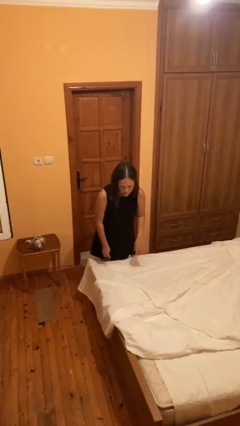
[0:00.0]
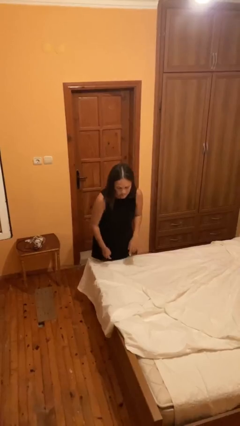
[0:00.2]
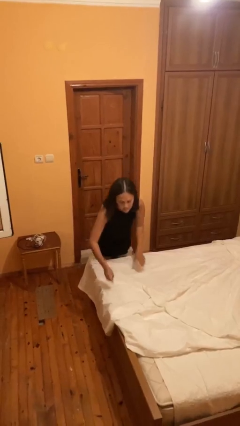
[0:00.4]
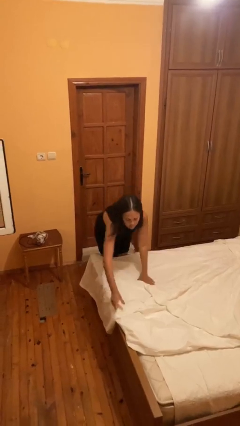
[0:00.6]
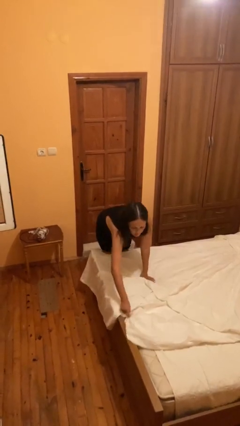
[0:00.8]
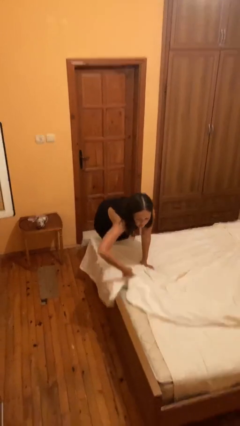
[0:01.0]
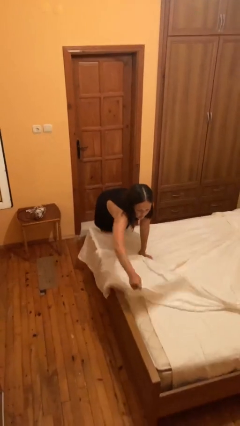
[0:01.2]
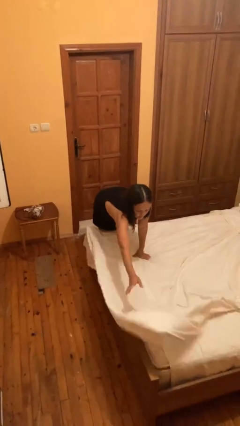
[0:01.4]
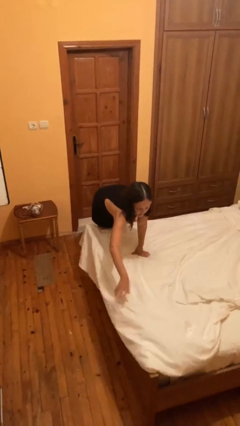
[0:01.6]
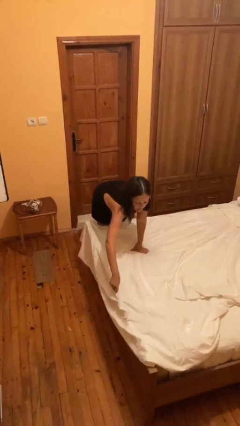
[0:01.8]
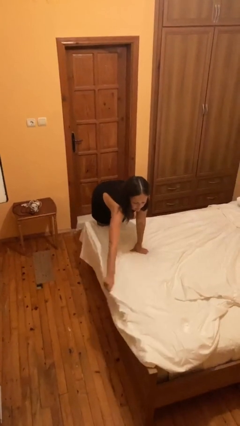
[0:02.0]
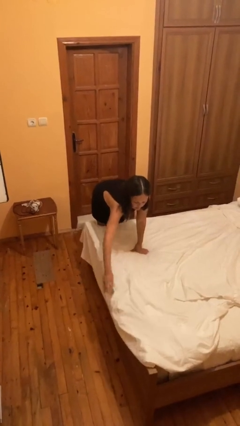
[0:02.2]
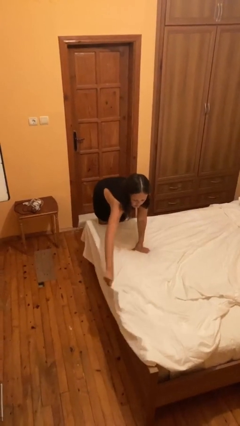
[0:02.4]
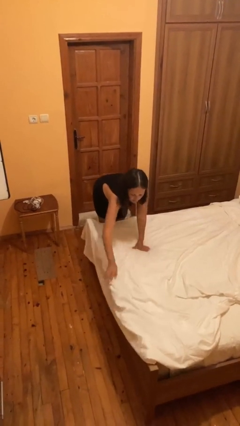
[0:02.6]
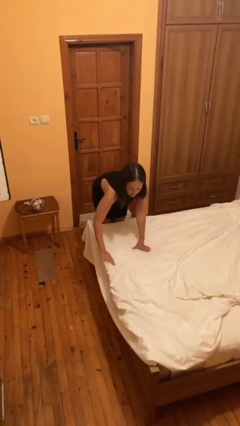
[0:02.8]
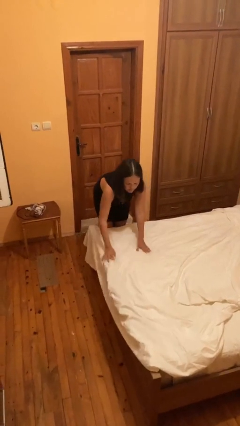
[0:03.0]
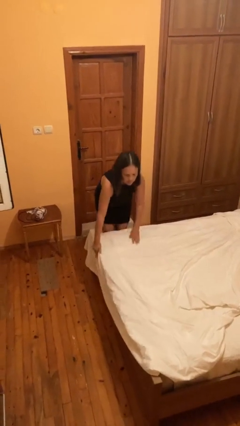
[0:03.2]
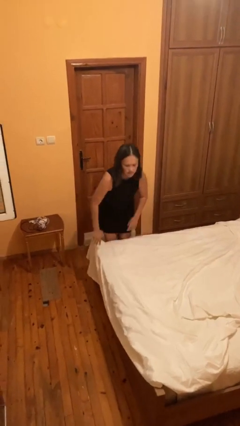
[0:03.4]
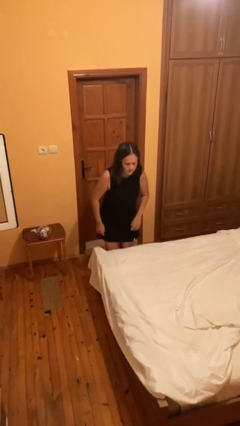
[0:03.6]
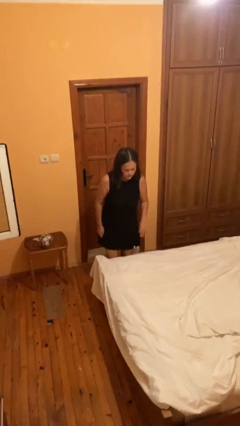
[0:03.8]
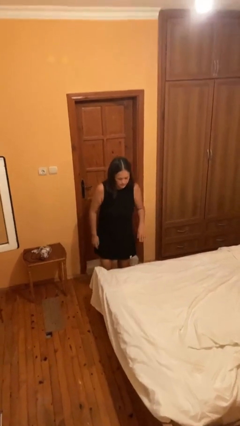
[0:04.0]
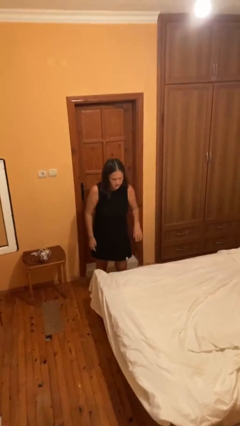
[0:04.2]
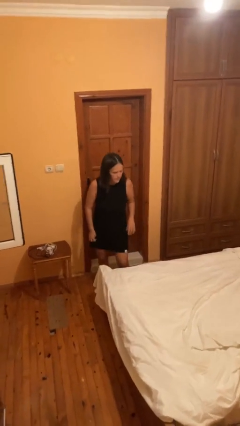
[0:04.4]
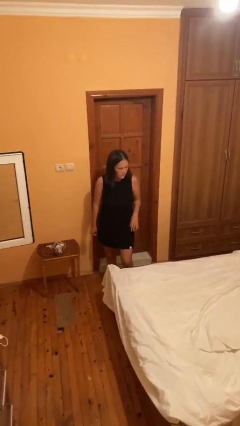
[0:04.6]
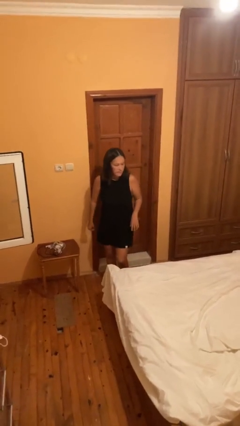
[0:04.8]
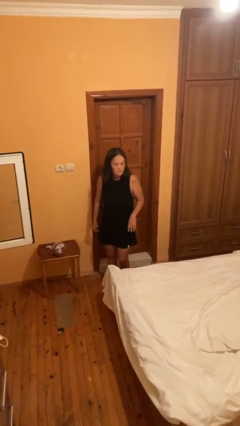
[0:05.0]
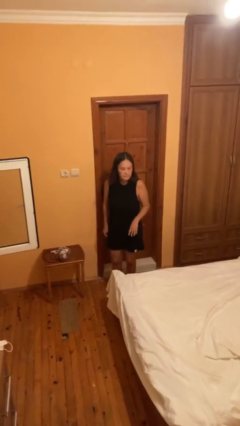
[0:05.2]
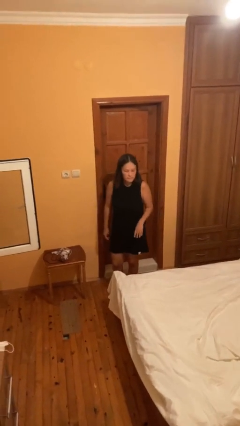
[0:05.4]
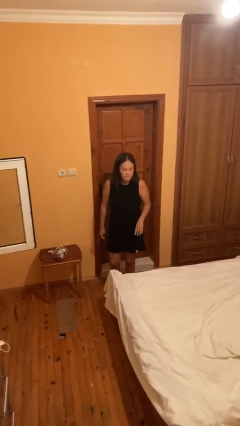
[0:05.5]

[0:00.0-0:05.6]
person makes bed

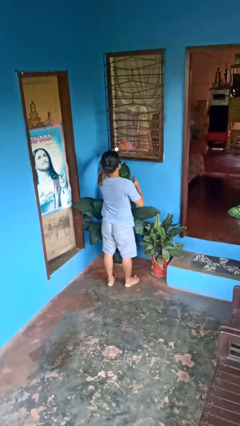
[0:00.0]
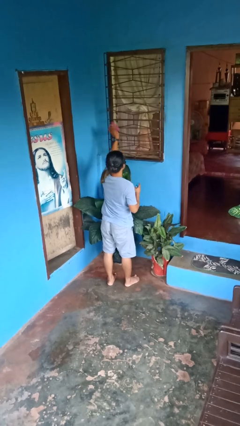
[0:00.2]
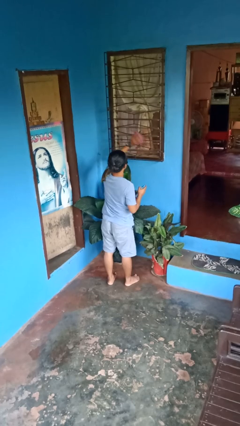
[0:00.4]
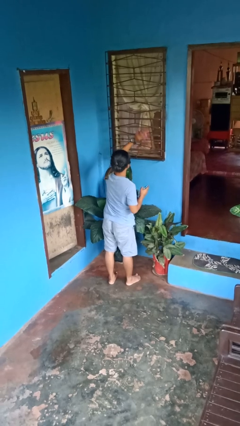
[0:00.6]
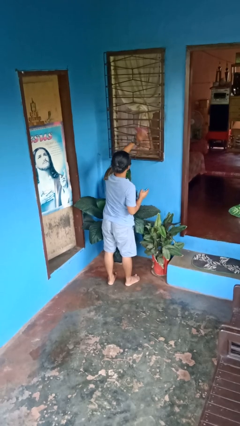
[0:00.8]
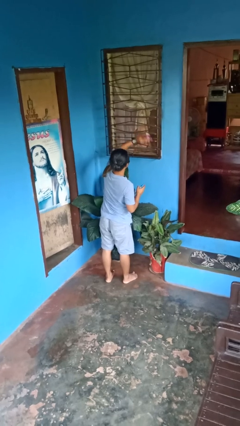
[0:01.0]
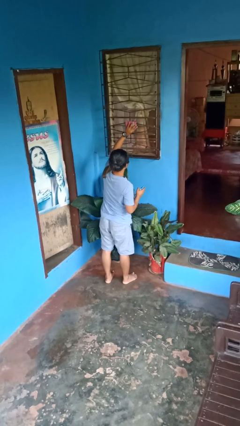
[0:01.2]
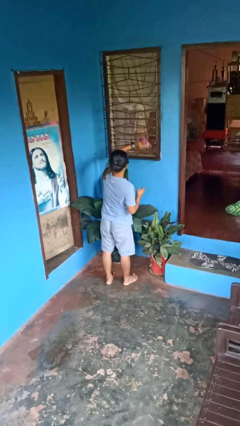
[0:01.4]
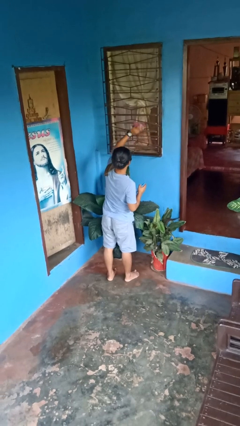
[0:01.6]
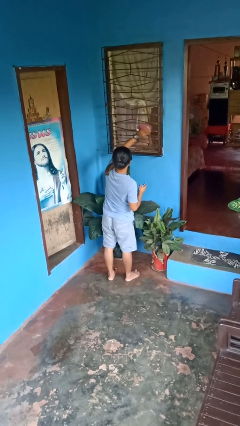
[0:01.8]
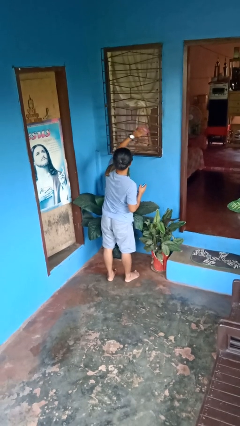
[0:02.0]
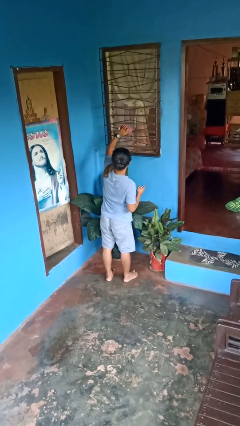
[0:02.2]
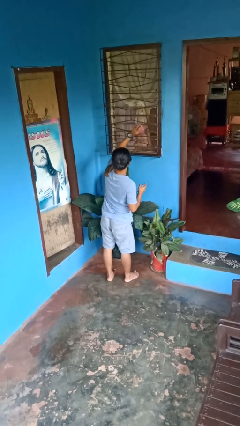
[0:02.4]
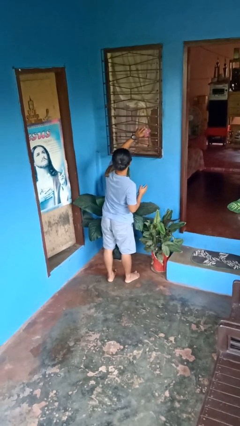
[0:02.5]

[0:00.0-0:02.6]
person washes window

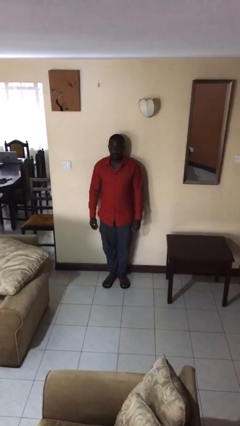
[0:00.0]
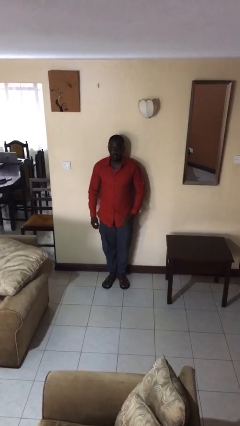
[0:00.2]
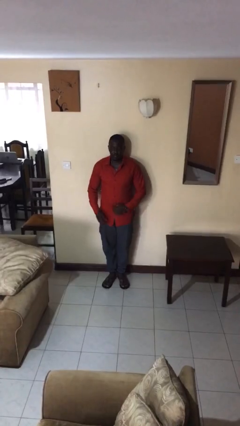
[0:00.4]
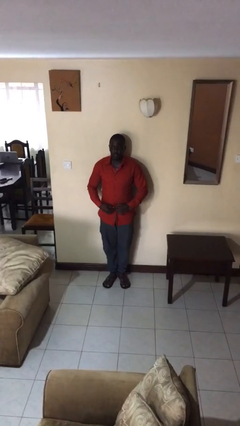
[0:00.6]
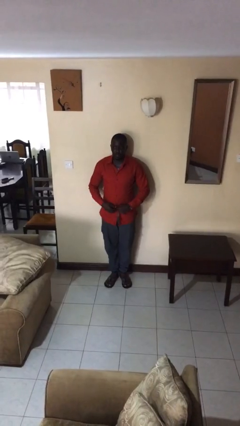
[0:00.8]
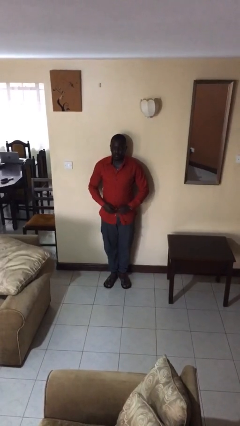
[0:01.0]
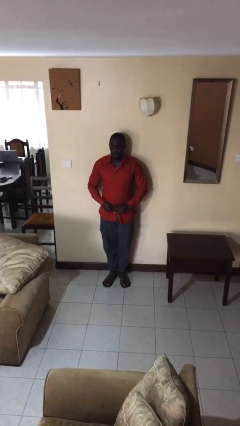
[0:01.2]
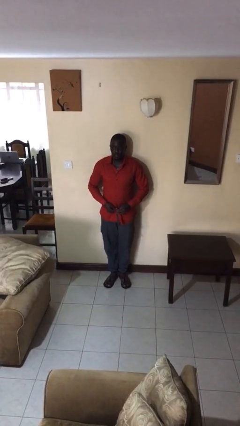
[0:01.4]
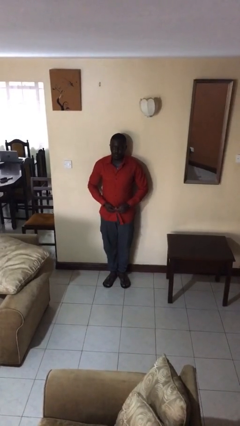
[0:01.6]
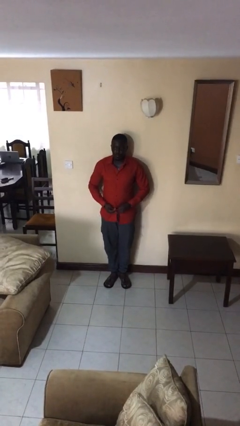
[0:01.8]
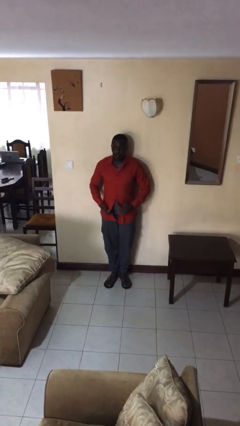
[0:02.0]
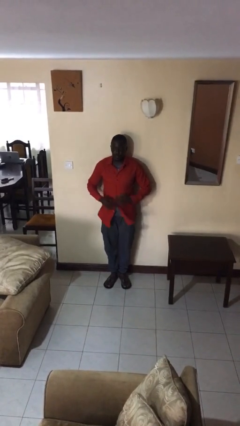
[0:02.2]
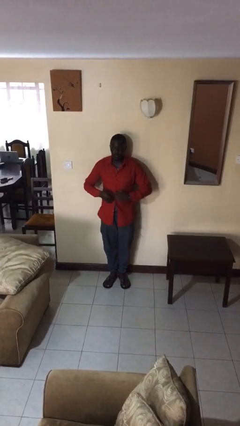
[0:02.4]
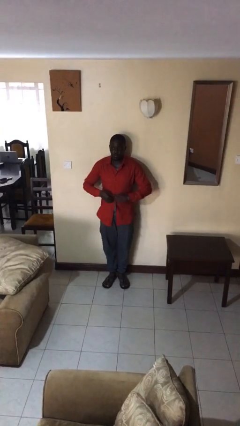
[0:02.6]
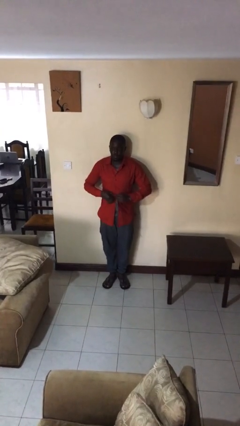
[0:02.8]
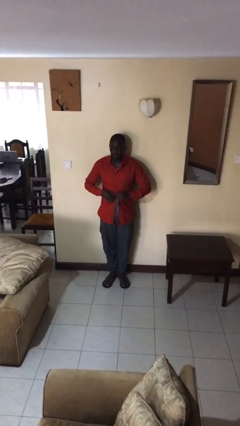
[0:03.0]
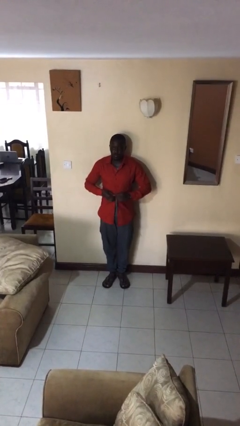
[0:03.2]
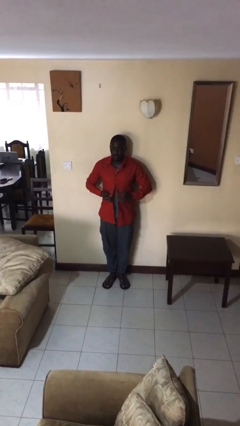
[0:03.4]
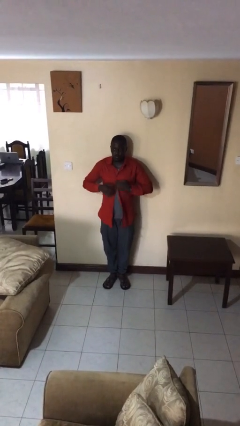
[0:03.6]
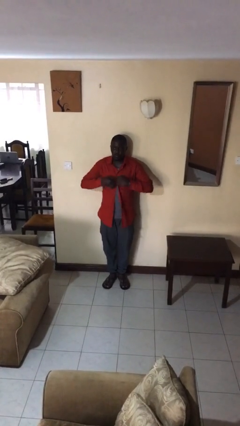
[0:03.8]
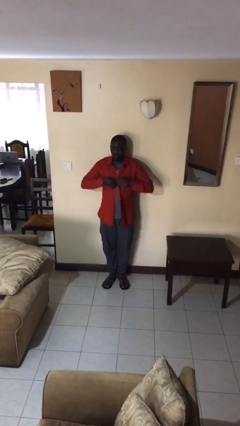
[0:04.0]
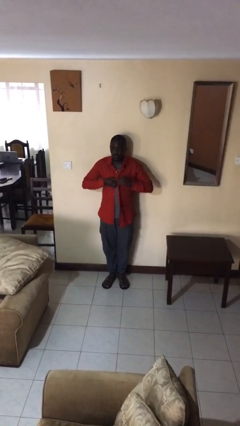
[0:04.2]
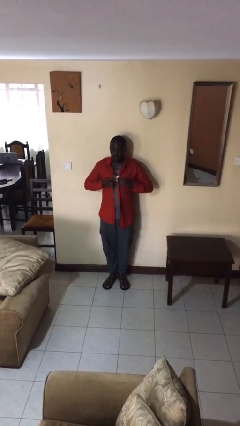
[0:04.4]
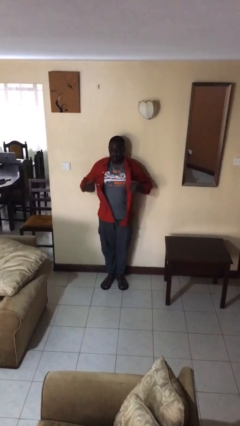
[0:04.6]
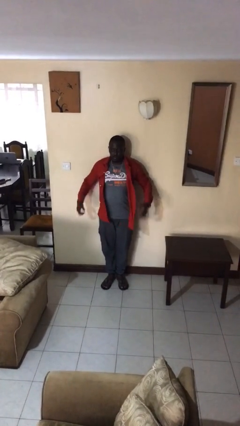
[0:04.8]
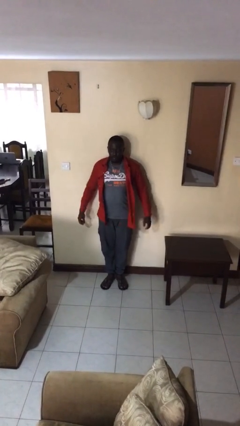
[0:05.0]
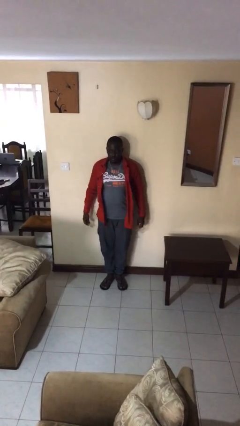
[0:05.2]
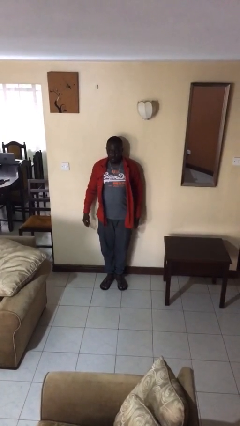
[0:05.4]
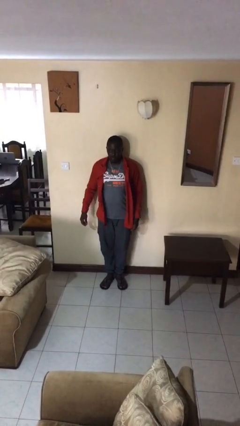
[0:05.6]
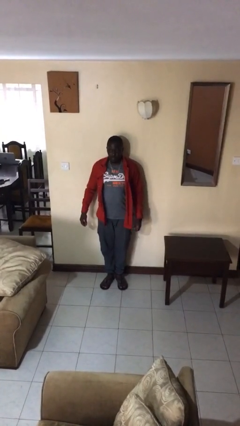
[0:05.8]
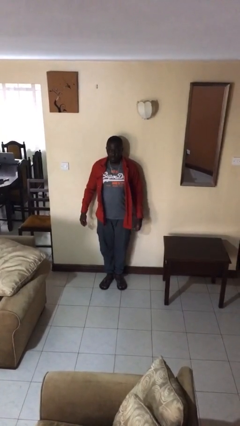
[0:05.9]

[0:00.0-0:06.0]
person unbuttons shirt

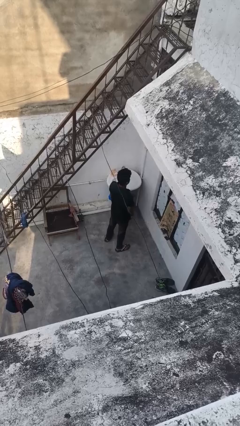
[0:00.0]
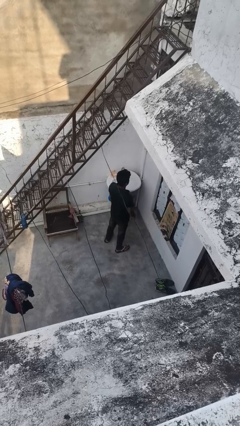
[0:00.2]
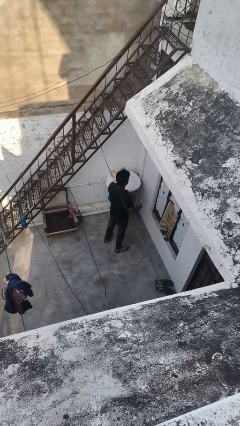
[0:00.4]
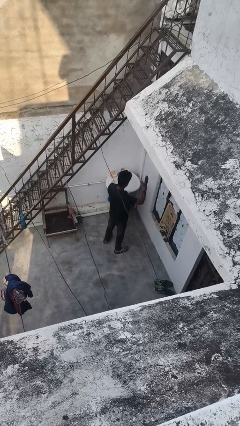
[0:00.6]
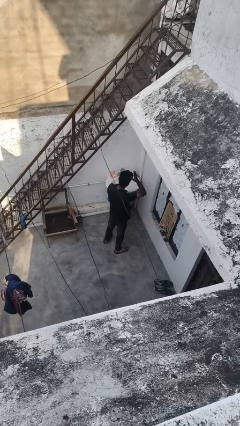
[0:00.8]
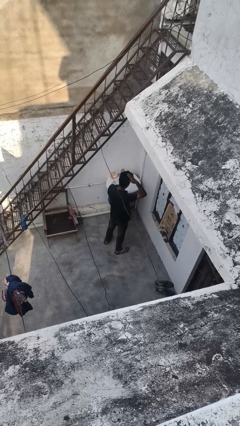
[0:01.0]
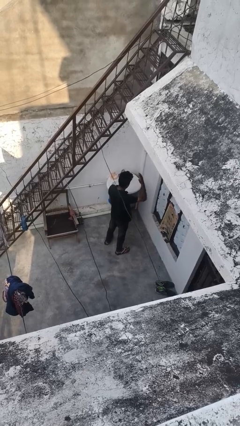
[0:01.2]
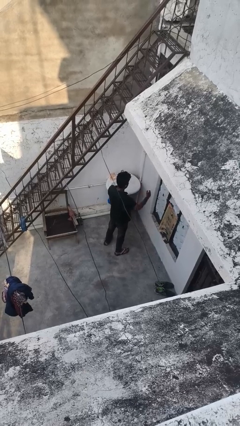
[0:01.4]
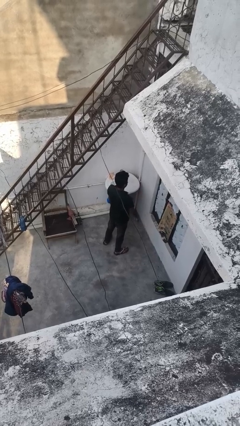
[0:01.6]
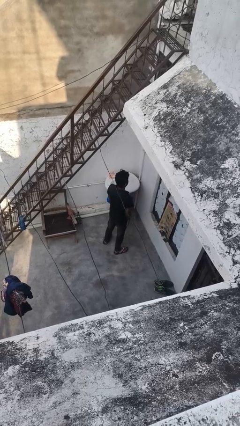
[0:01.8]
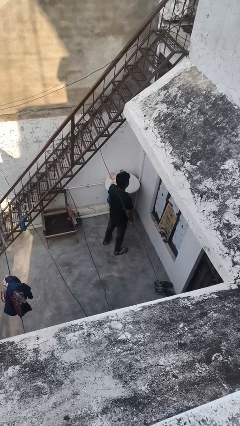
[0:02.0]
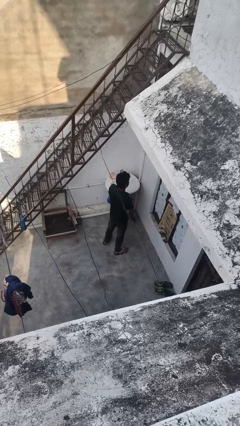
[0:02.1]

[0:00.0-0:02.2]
person pats head

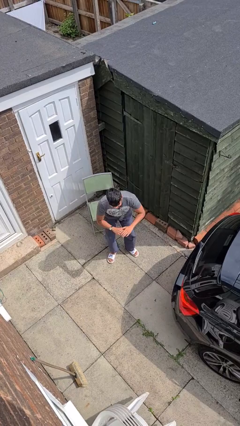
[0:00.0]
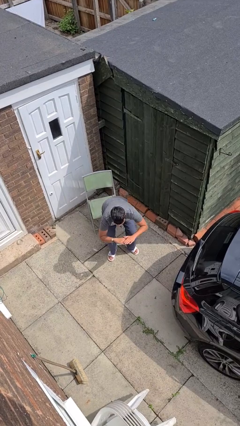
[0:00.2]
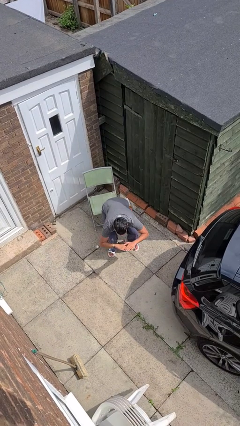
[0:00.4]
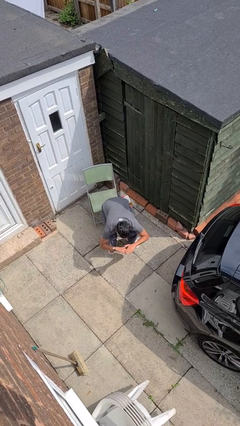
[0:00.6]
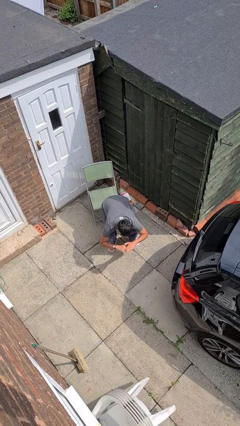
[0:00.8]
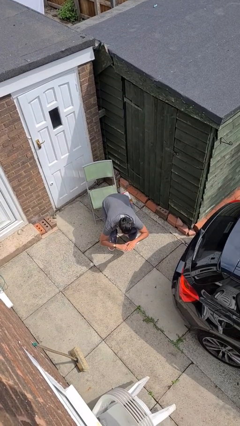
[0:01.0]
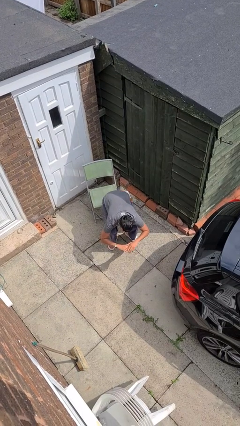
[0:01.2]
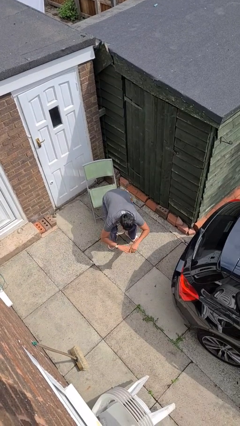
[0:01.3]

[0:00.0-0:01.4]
person squats

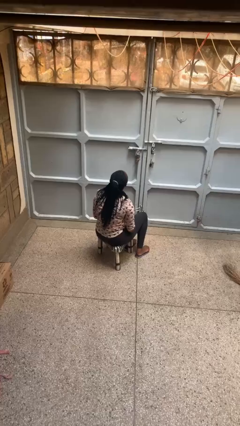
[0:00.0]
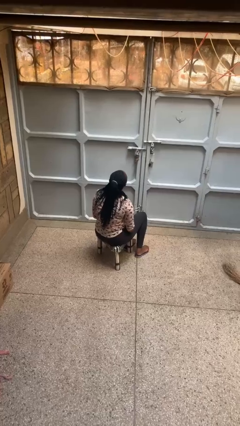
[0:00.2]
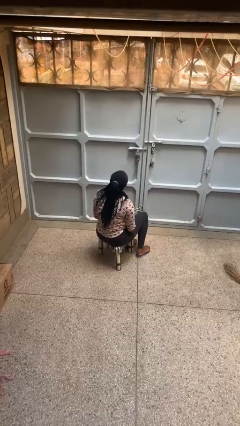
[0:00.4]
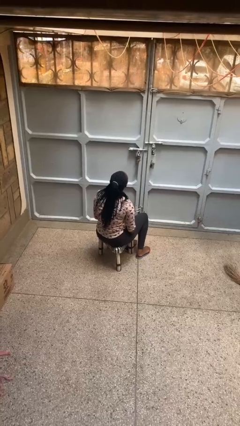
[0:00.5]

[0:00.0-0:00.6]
person rubs foot
